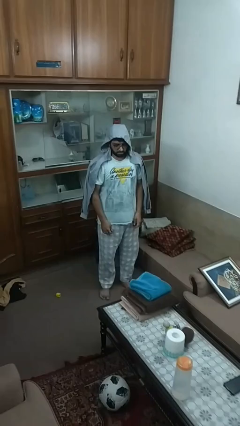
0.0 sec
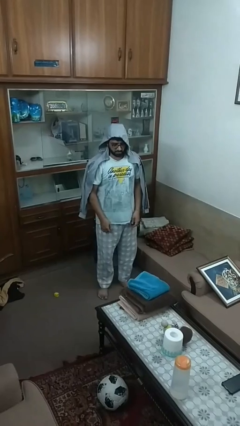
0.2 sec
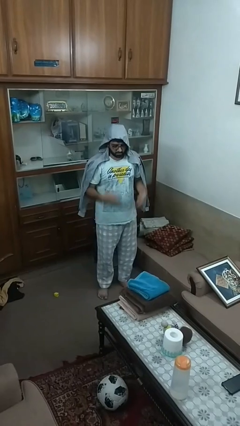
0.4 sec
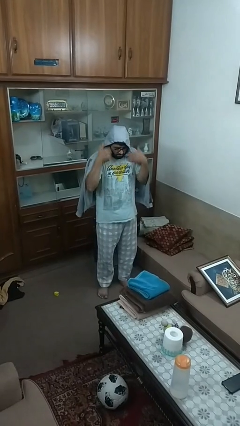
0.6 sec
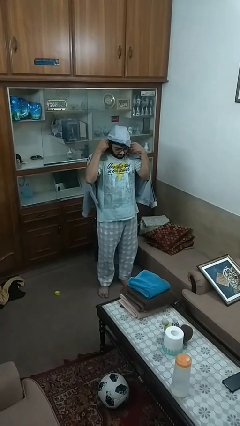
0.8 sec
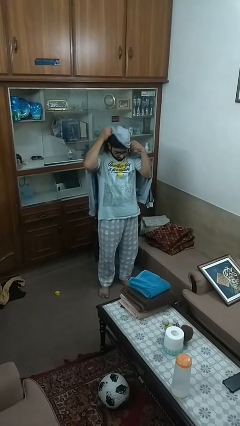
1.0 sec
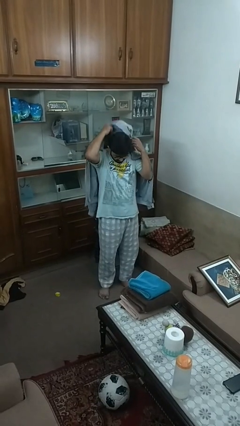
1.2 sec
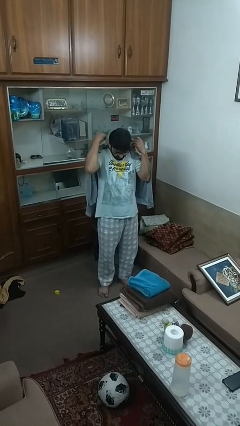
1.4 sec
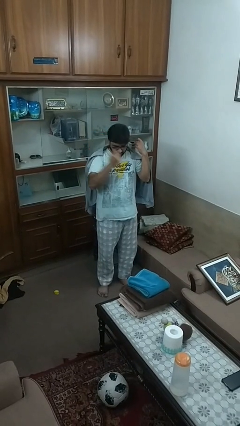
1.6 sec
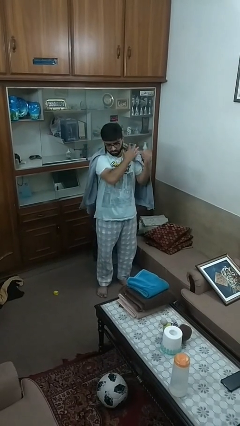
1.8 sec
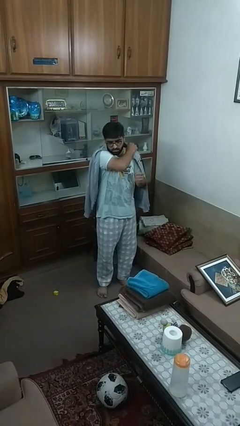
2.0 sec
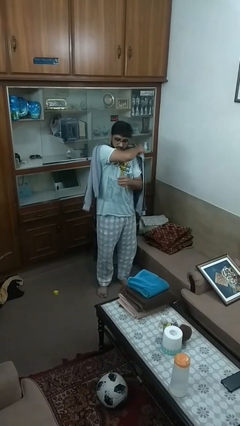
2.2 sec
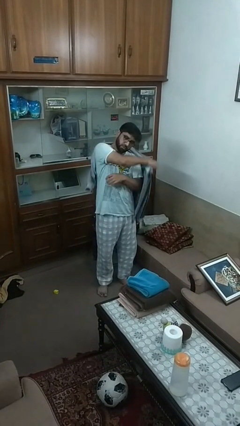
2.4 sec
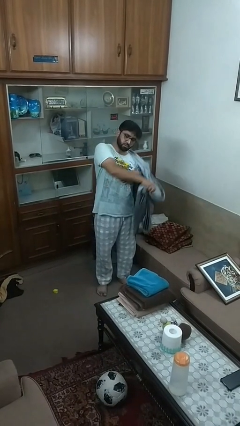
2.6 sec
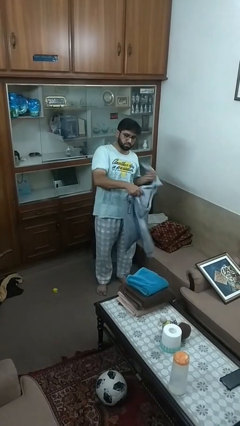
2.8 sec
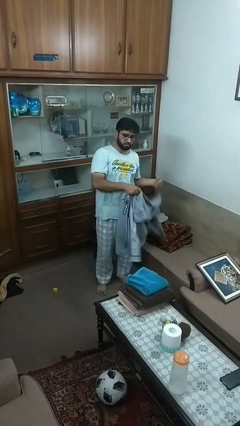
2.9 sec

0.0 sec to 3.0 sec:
person takes off hoodie

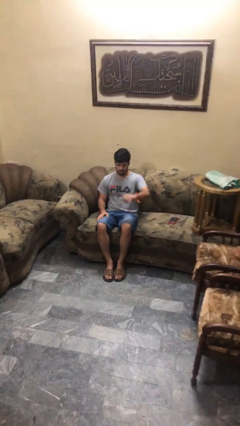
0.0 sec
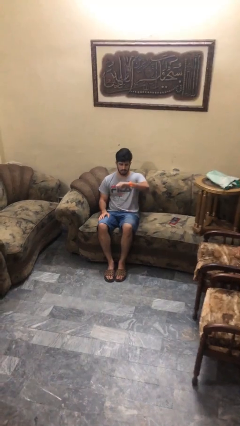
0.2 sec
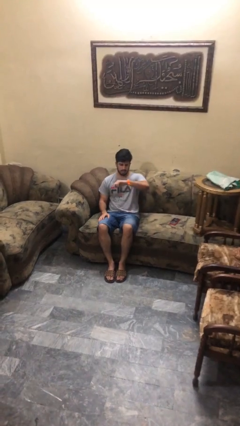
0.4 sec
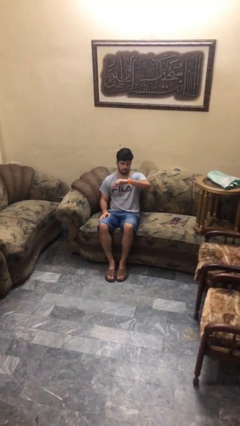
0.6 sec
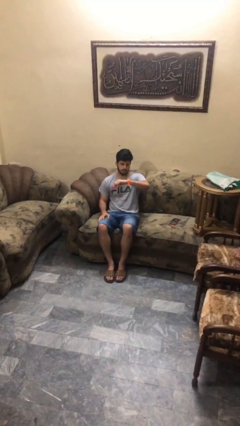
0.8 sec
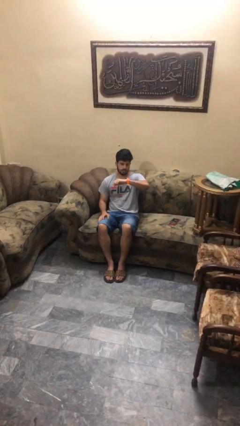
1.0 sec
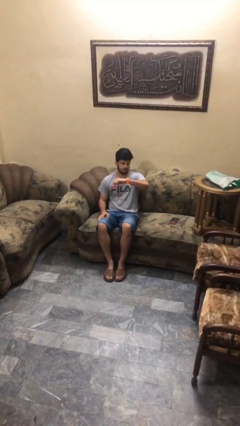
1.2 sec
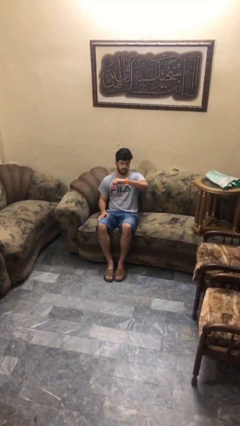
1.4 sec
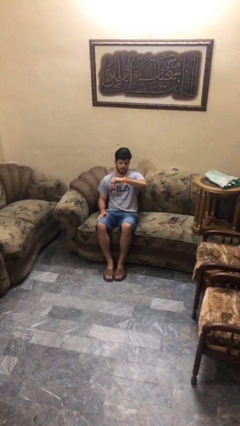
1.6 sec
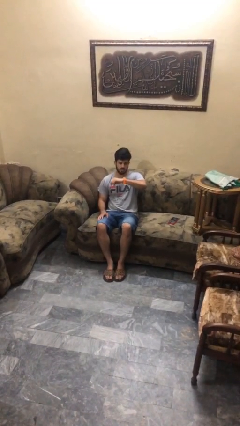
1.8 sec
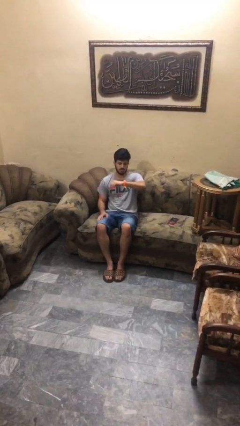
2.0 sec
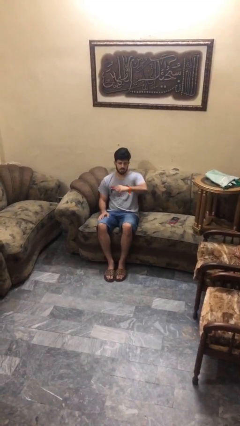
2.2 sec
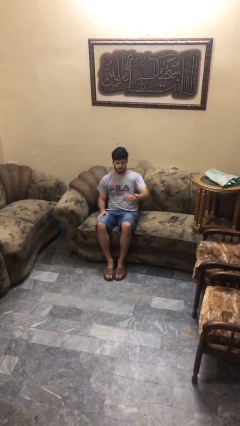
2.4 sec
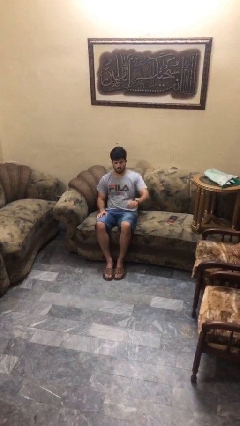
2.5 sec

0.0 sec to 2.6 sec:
person looks at wristwatch

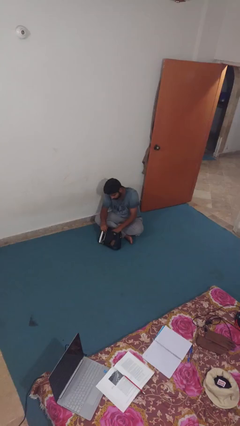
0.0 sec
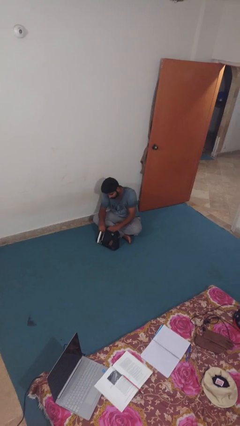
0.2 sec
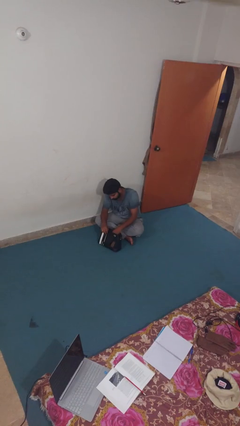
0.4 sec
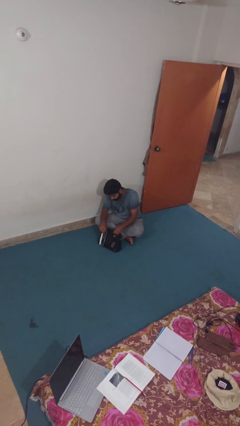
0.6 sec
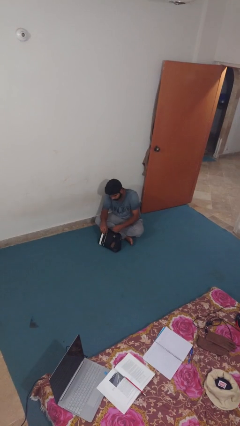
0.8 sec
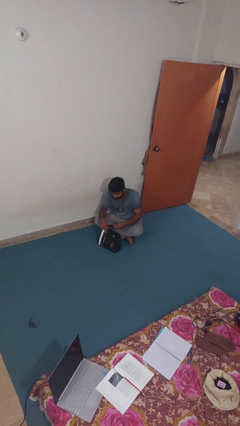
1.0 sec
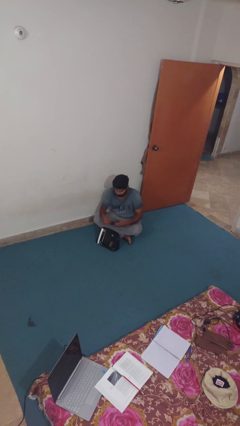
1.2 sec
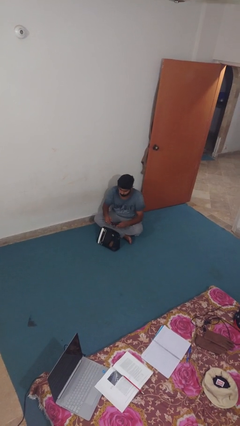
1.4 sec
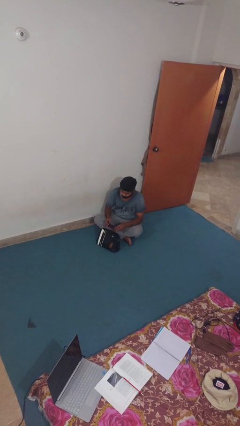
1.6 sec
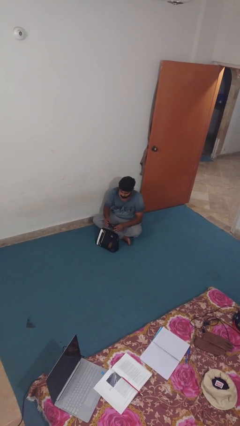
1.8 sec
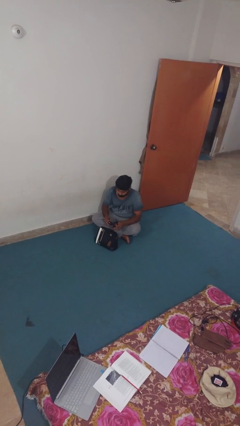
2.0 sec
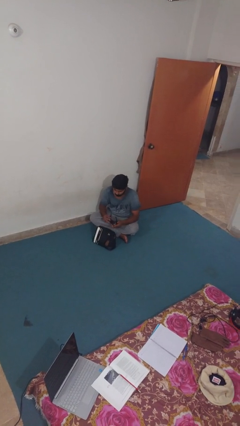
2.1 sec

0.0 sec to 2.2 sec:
person takes object from purse

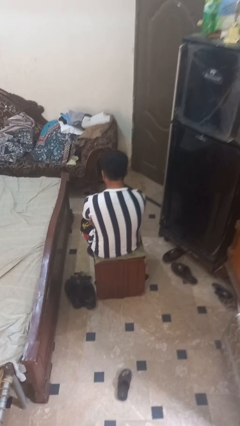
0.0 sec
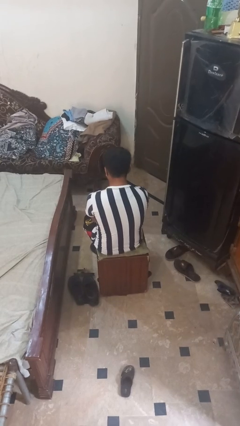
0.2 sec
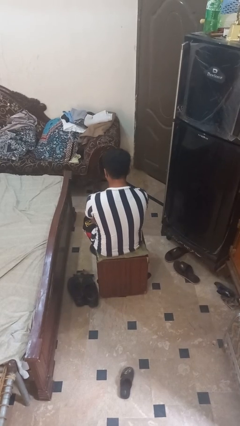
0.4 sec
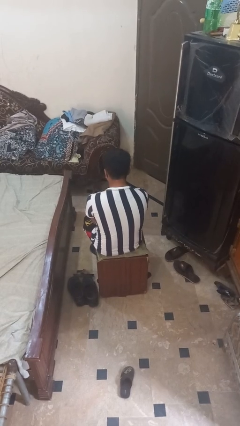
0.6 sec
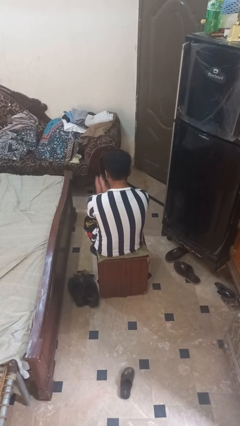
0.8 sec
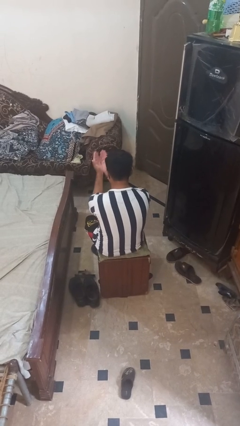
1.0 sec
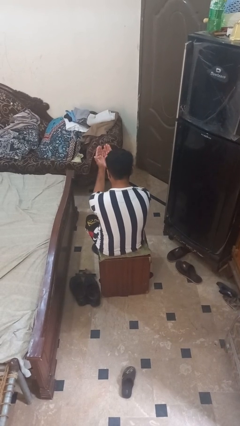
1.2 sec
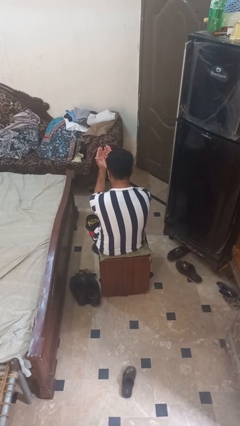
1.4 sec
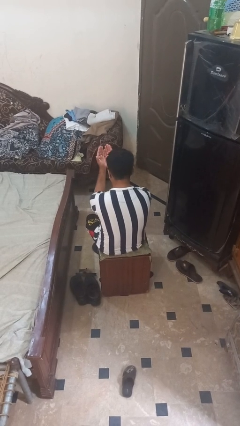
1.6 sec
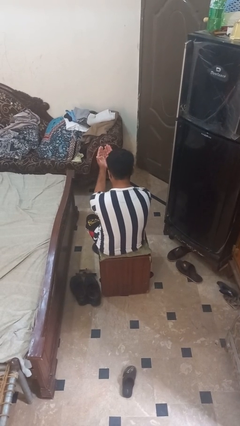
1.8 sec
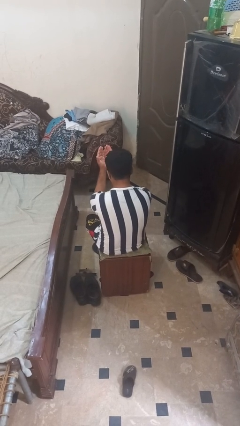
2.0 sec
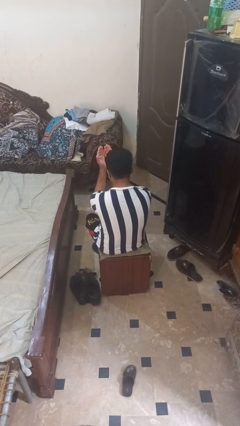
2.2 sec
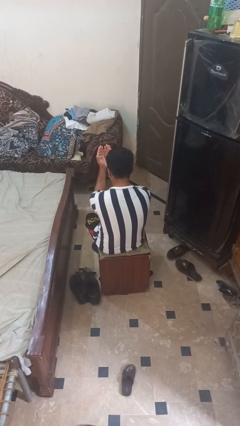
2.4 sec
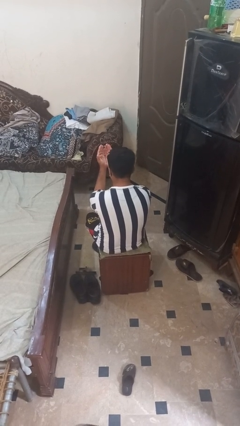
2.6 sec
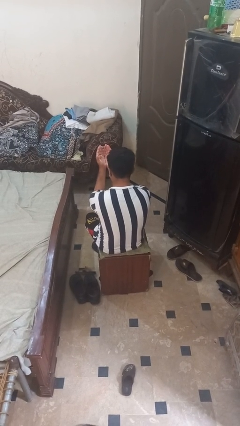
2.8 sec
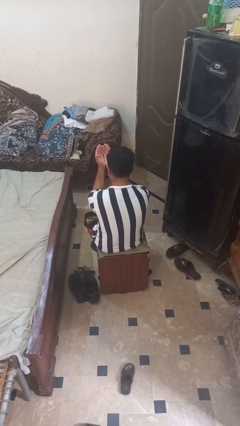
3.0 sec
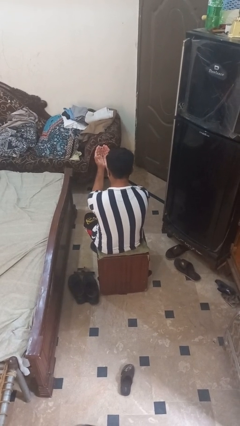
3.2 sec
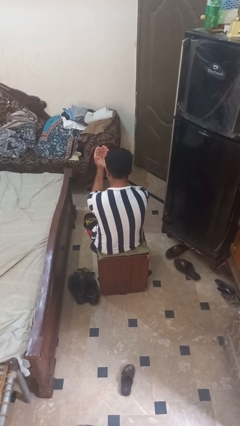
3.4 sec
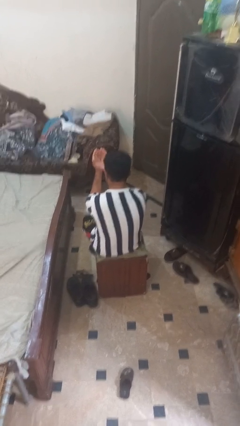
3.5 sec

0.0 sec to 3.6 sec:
person prays

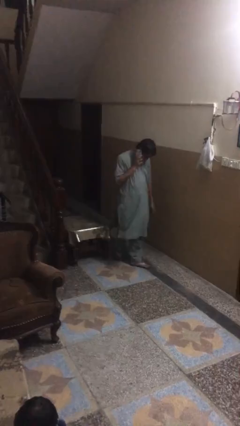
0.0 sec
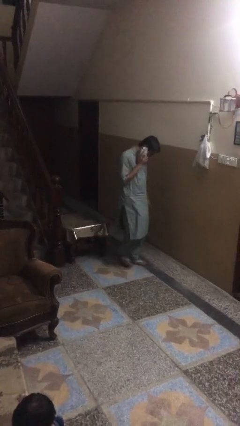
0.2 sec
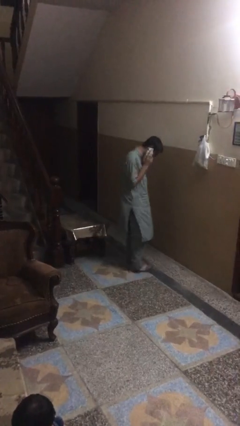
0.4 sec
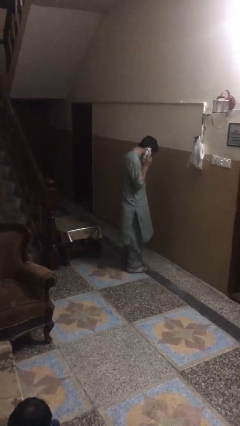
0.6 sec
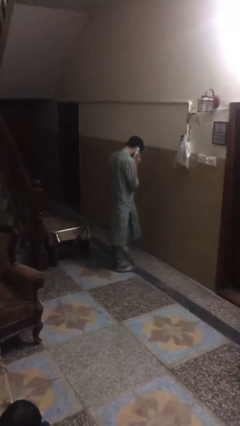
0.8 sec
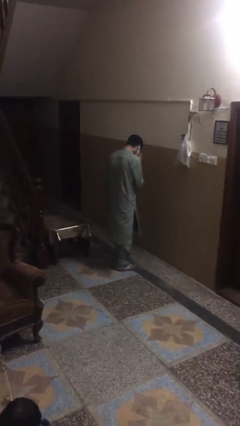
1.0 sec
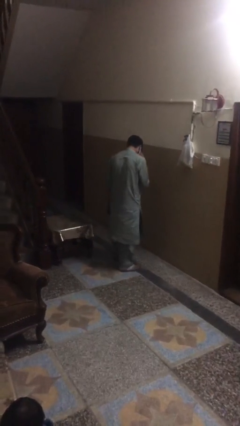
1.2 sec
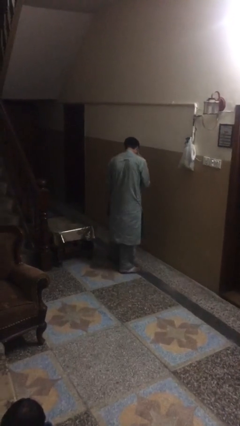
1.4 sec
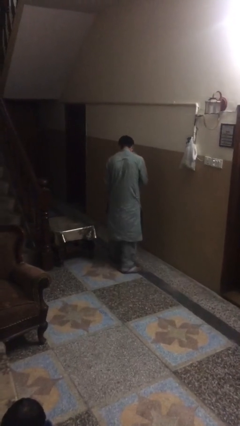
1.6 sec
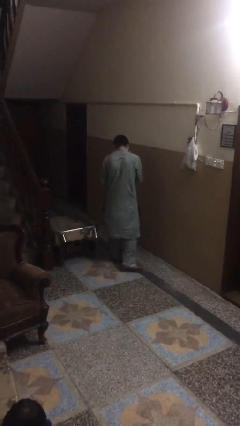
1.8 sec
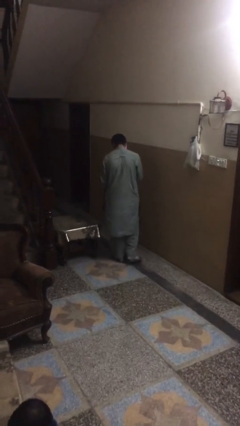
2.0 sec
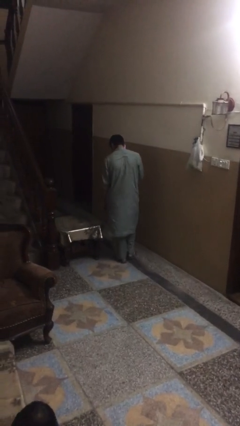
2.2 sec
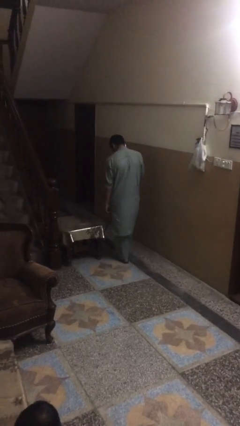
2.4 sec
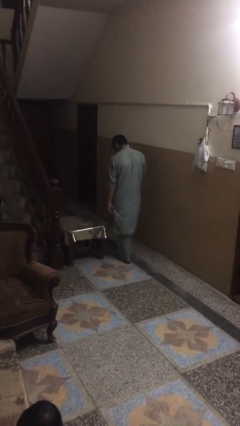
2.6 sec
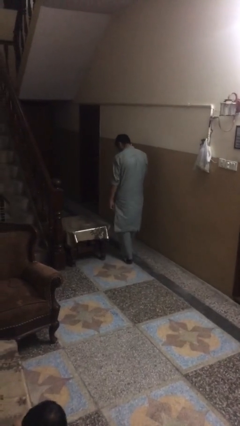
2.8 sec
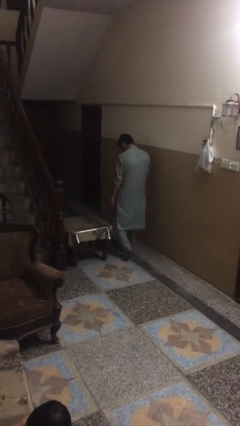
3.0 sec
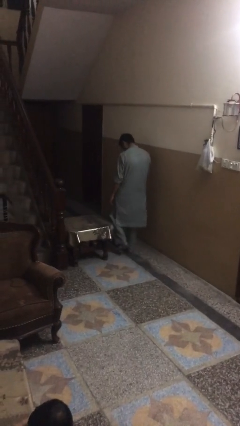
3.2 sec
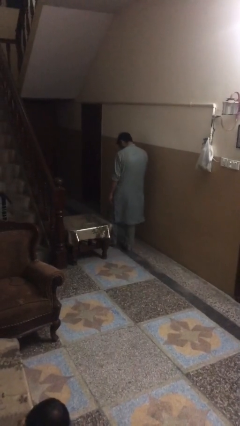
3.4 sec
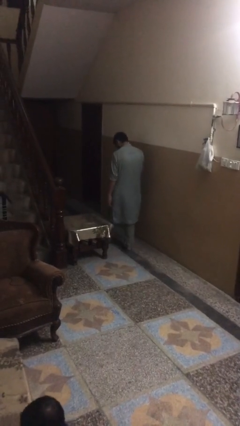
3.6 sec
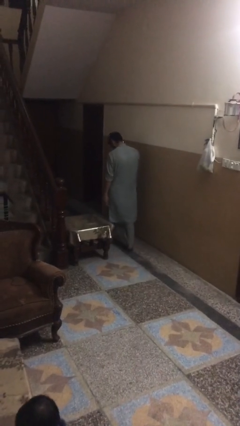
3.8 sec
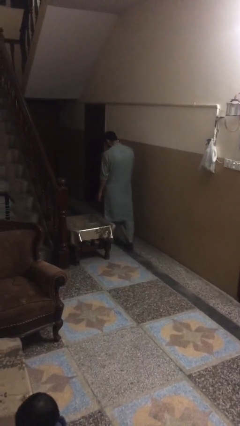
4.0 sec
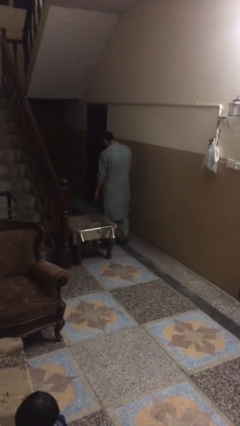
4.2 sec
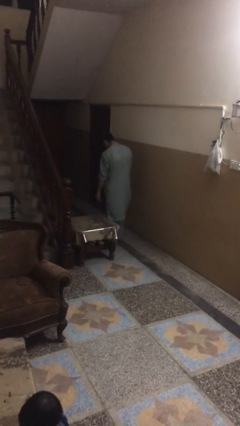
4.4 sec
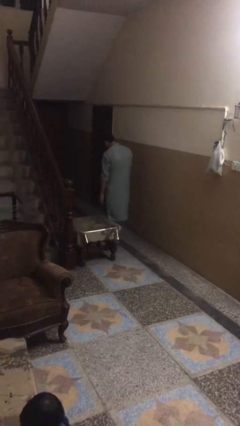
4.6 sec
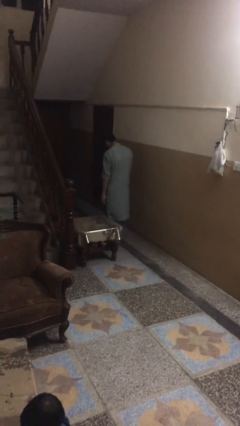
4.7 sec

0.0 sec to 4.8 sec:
person talks on phone

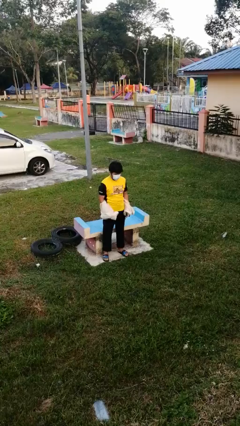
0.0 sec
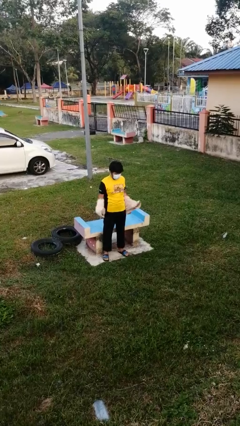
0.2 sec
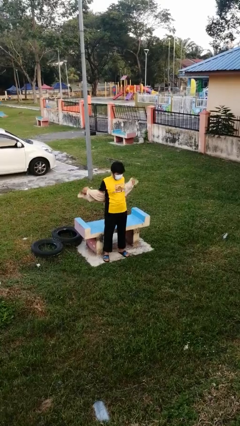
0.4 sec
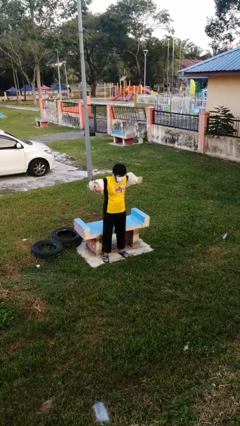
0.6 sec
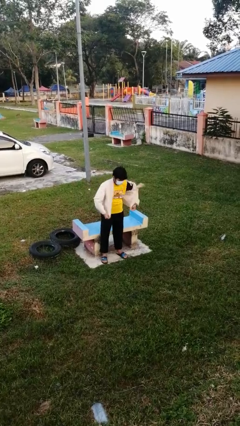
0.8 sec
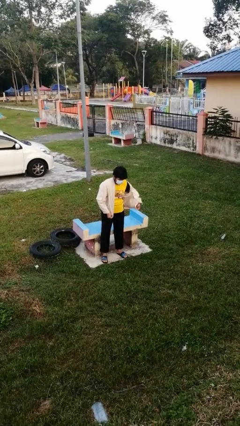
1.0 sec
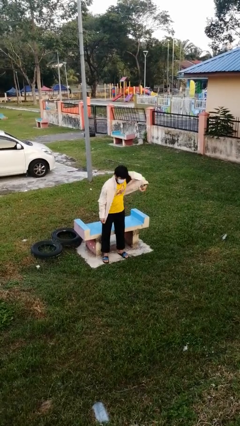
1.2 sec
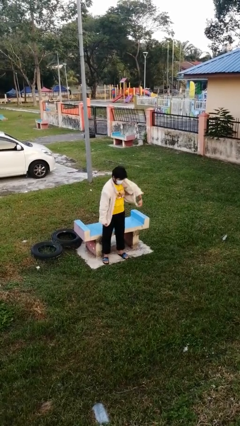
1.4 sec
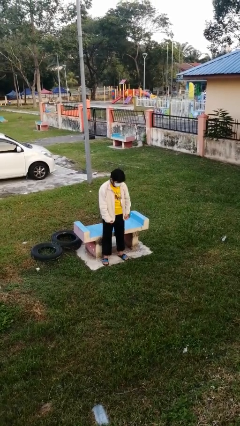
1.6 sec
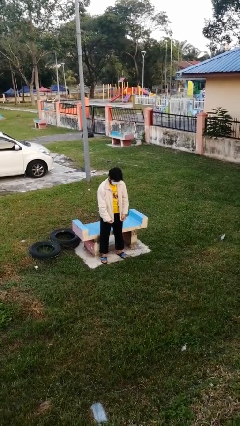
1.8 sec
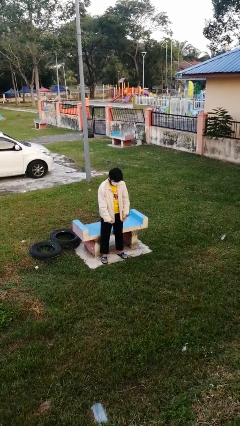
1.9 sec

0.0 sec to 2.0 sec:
person puts on jacket
